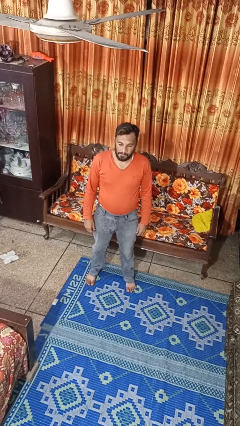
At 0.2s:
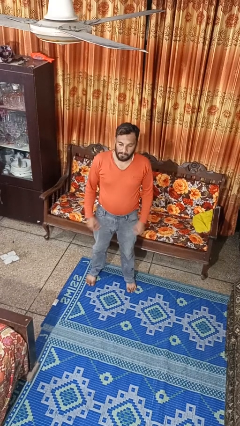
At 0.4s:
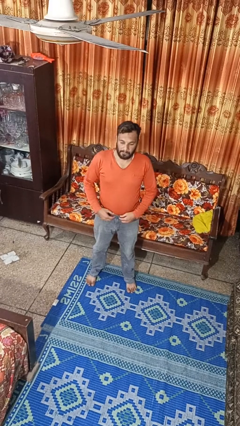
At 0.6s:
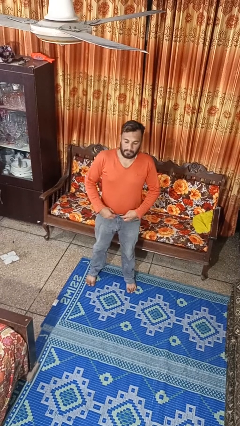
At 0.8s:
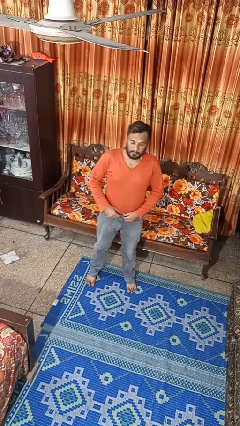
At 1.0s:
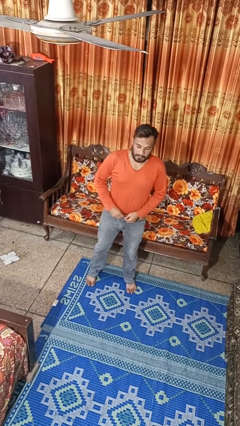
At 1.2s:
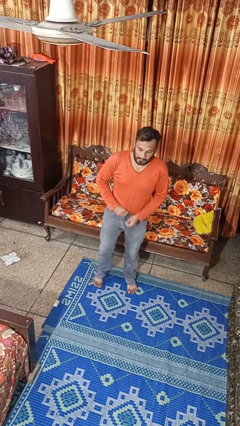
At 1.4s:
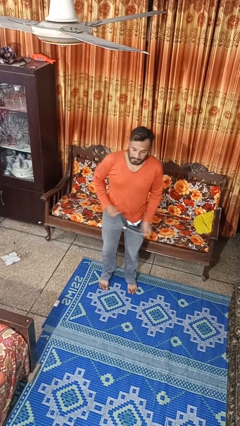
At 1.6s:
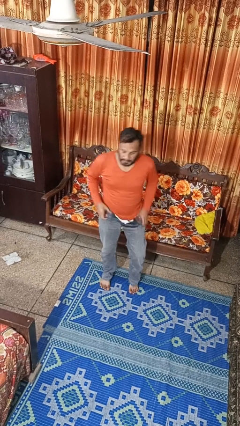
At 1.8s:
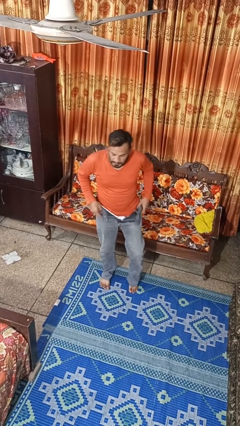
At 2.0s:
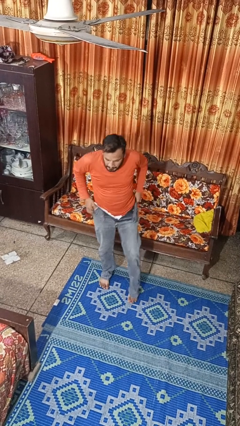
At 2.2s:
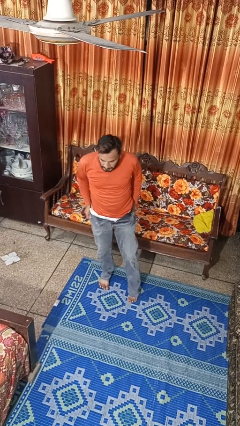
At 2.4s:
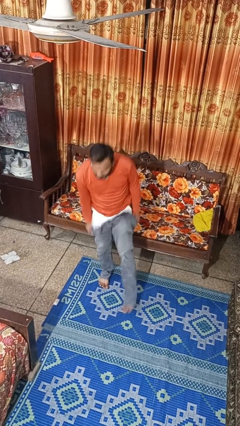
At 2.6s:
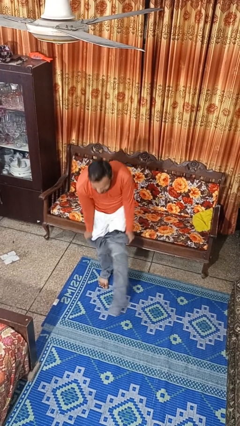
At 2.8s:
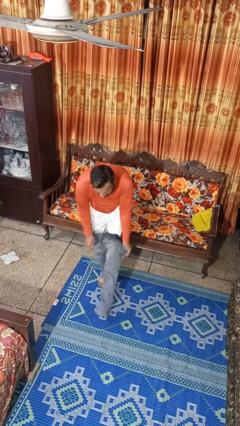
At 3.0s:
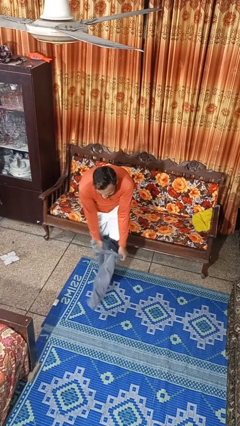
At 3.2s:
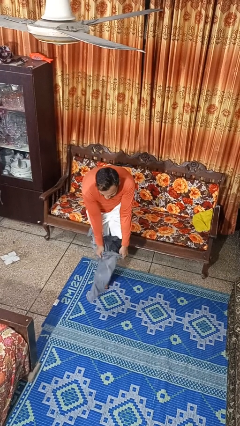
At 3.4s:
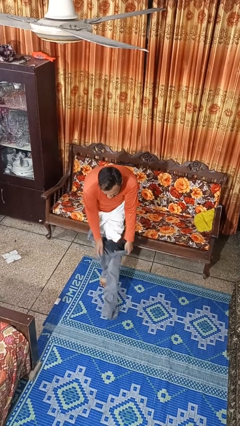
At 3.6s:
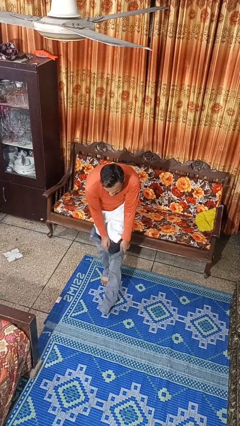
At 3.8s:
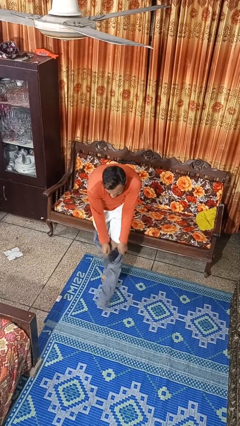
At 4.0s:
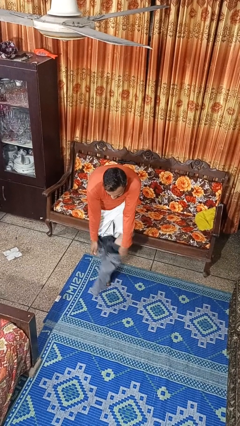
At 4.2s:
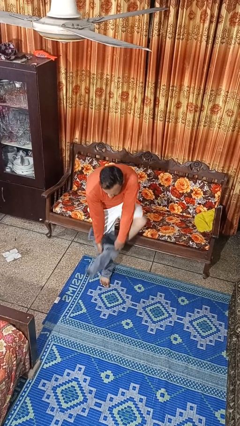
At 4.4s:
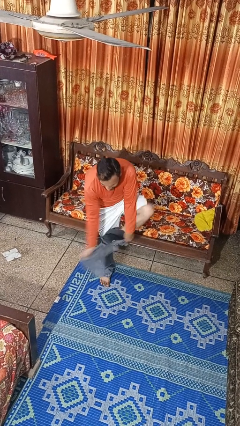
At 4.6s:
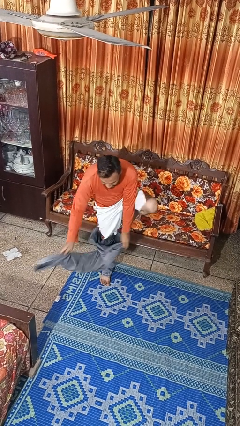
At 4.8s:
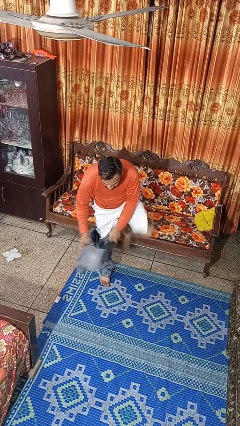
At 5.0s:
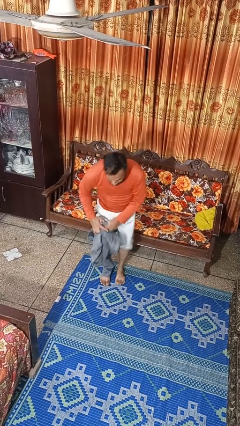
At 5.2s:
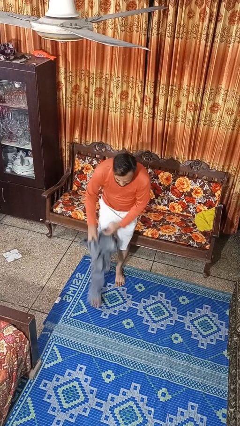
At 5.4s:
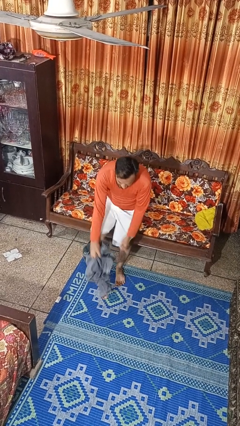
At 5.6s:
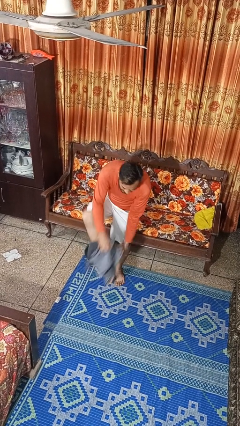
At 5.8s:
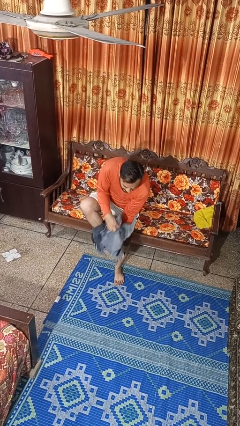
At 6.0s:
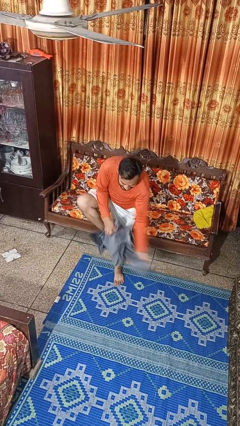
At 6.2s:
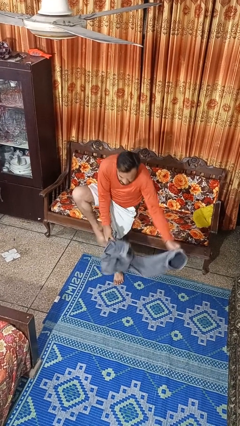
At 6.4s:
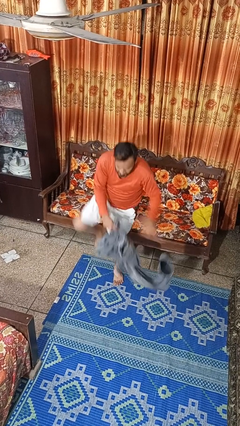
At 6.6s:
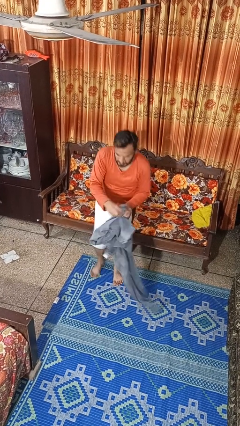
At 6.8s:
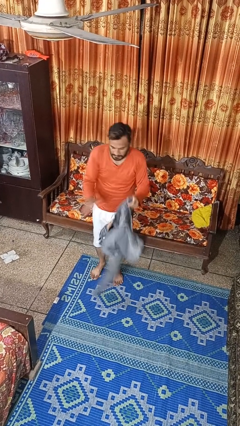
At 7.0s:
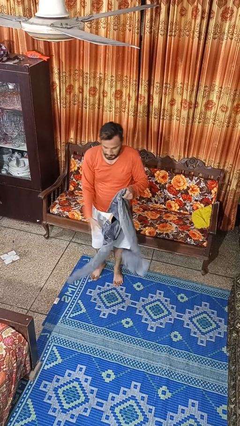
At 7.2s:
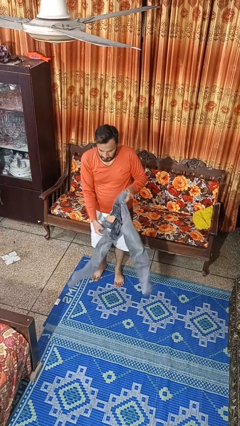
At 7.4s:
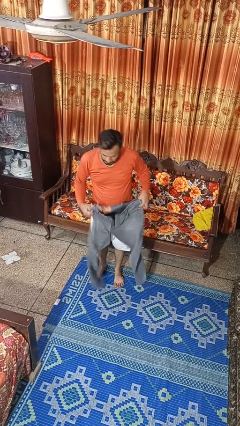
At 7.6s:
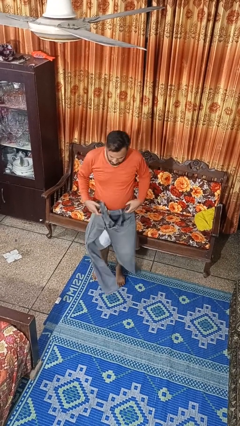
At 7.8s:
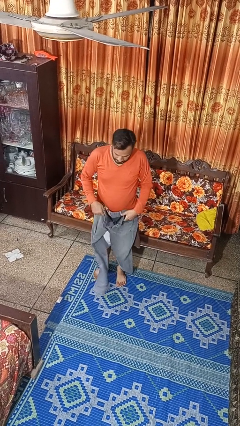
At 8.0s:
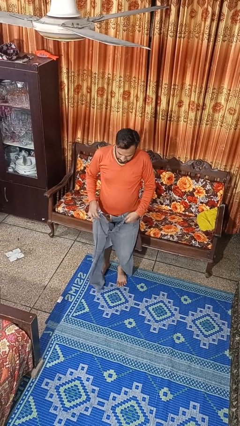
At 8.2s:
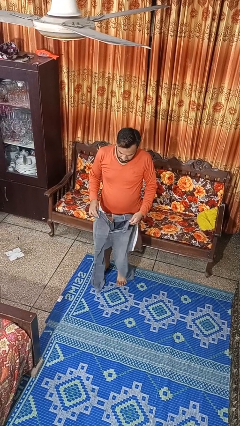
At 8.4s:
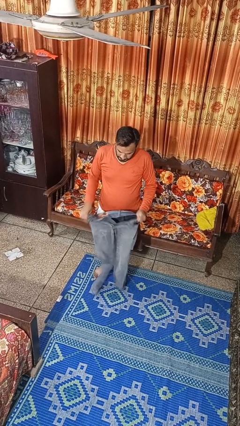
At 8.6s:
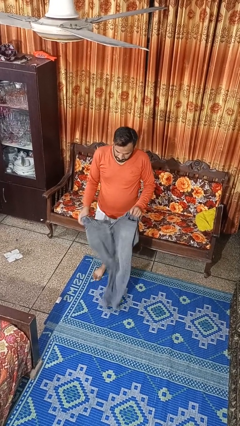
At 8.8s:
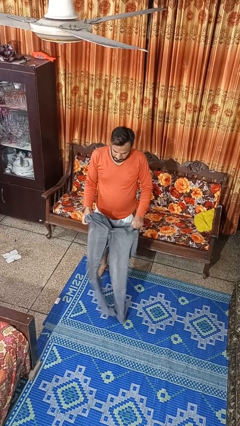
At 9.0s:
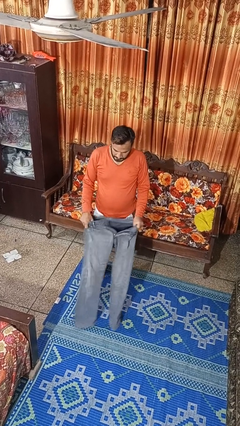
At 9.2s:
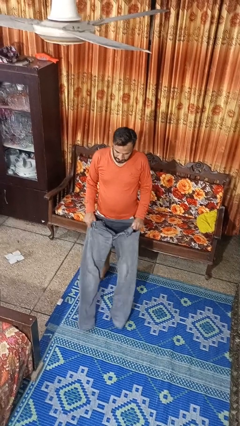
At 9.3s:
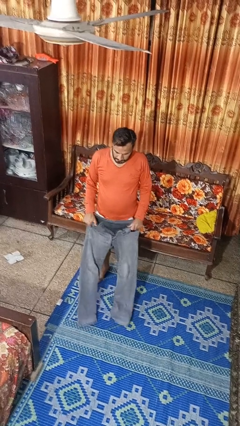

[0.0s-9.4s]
person takes off pants

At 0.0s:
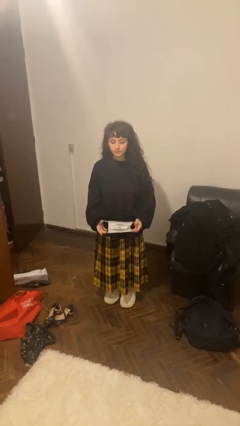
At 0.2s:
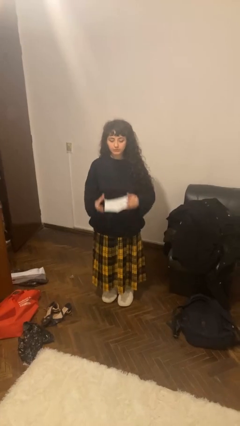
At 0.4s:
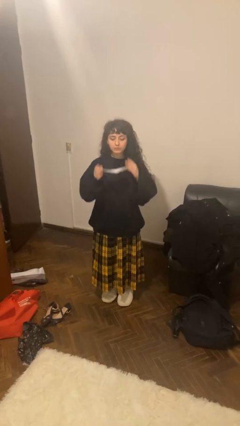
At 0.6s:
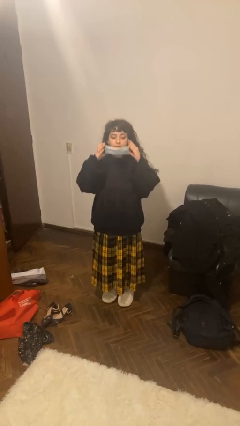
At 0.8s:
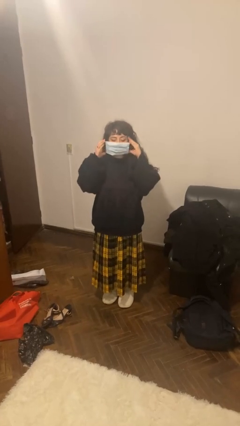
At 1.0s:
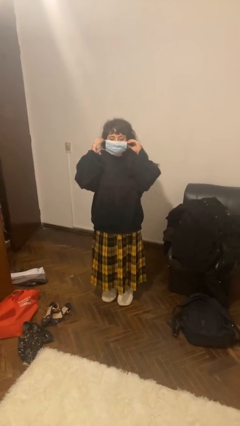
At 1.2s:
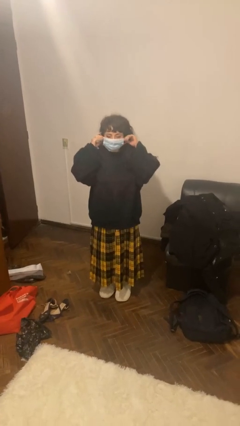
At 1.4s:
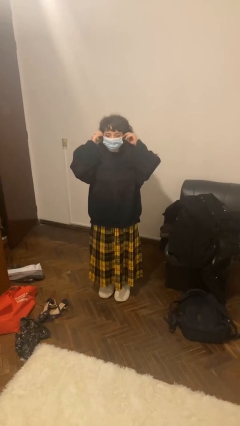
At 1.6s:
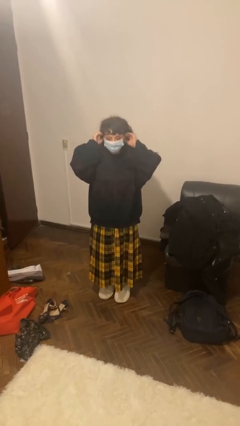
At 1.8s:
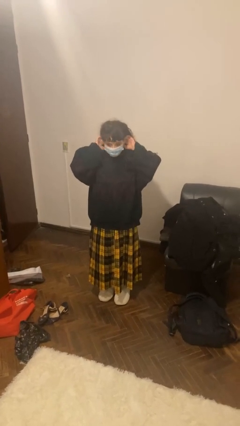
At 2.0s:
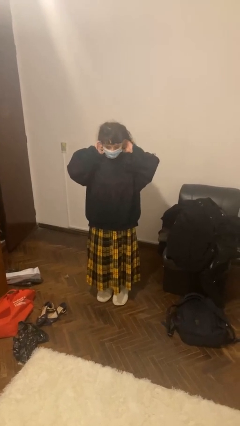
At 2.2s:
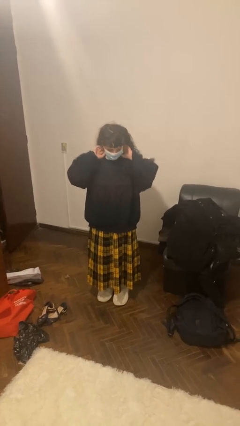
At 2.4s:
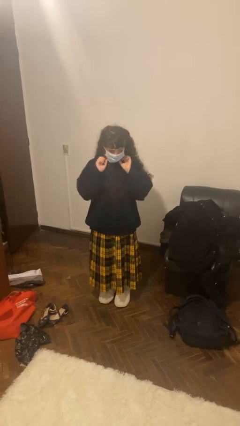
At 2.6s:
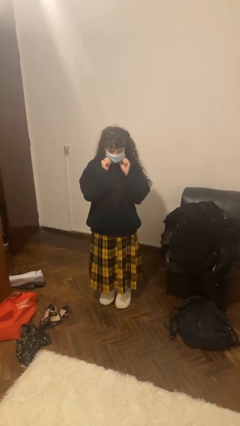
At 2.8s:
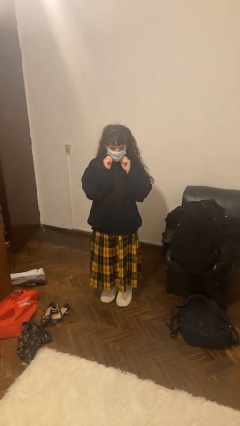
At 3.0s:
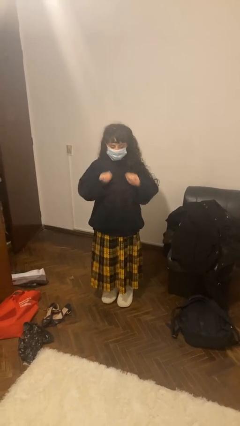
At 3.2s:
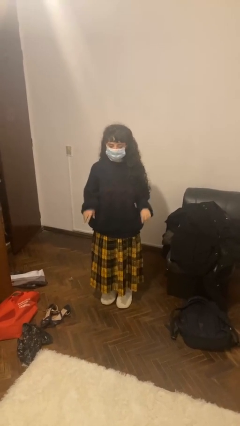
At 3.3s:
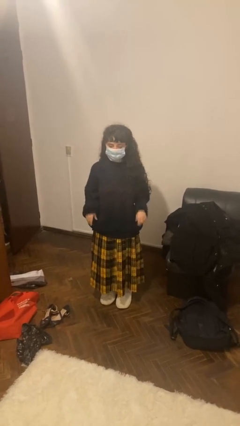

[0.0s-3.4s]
person puts on facemask

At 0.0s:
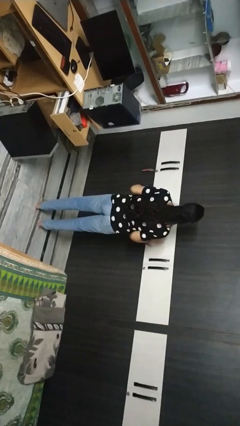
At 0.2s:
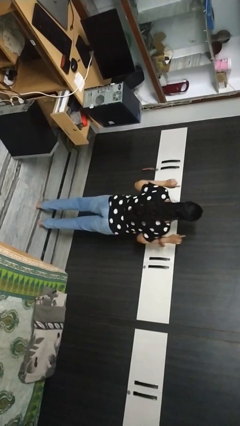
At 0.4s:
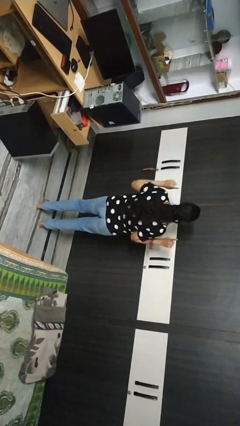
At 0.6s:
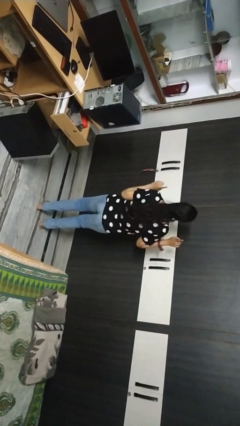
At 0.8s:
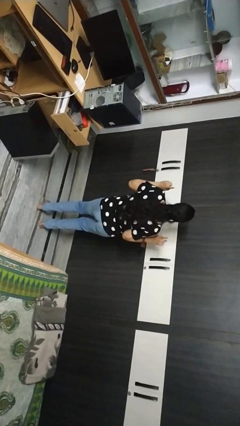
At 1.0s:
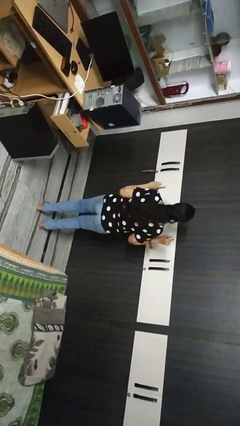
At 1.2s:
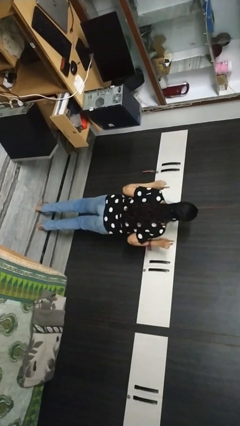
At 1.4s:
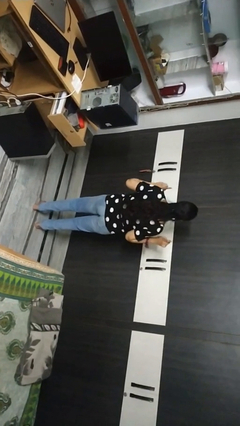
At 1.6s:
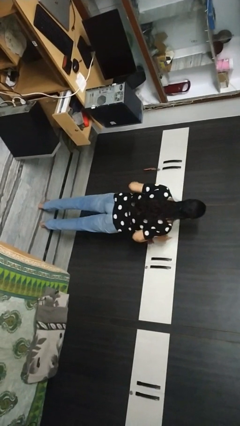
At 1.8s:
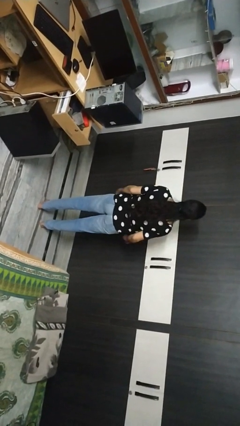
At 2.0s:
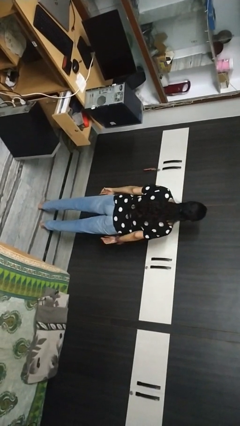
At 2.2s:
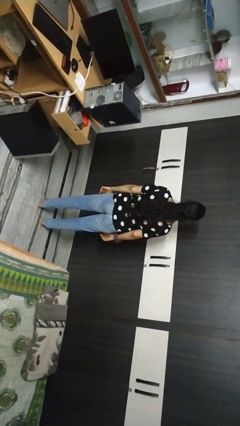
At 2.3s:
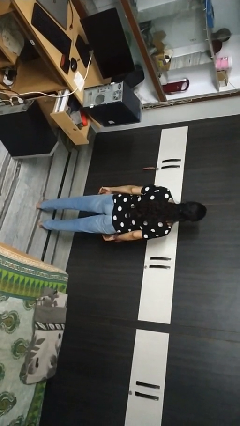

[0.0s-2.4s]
person dances in place

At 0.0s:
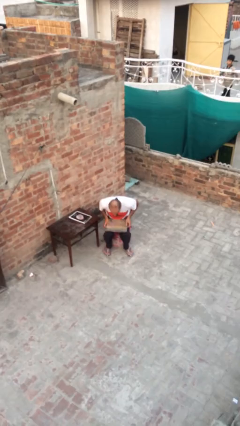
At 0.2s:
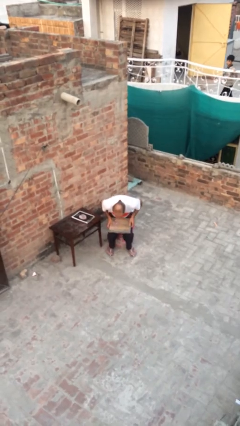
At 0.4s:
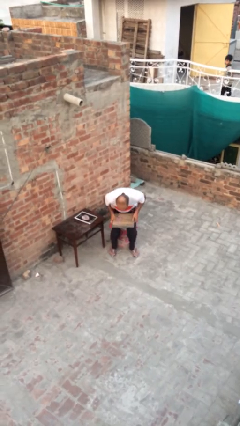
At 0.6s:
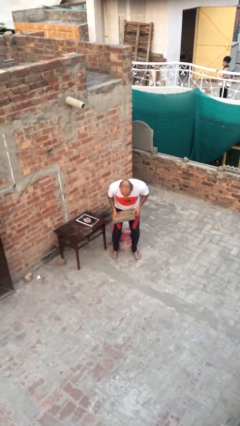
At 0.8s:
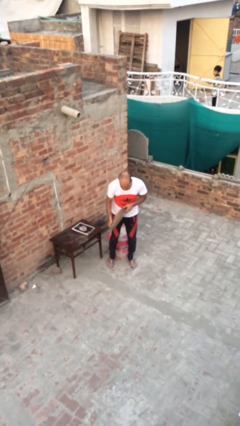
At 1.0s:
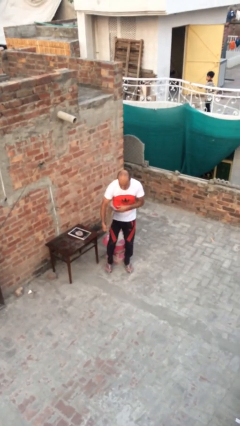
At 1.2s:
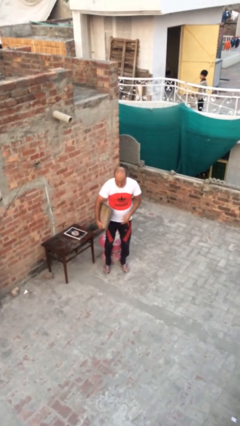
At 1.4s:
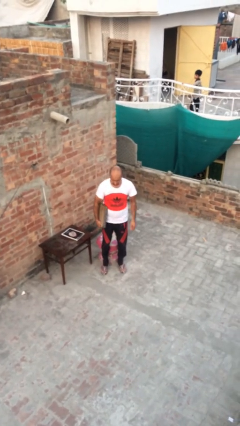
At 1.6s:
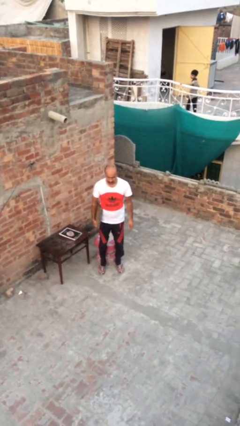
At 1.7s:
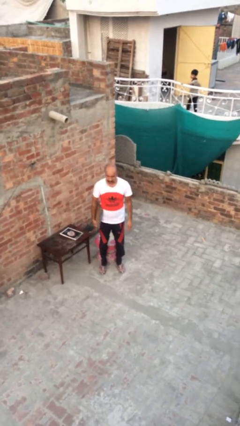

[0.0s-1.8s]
person stands up

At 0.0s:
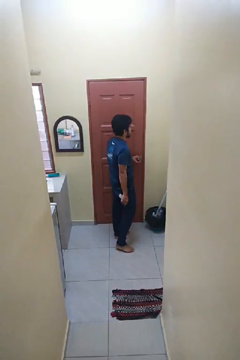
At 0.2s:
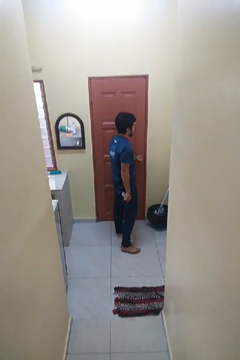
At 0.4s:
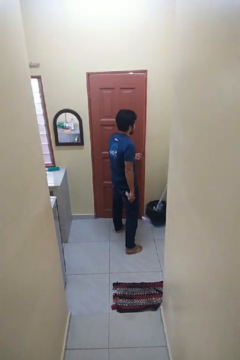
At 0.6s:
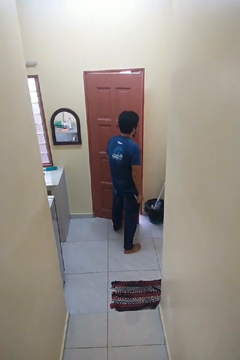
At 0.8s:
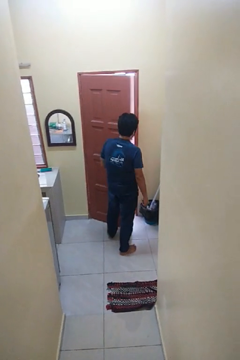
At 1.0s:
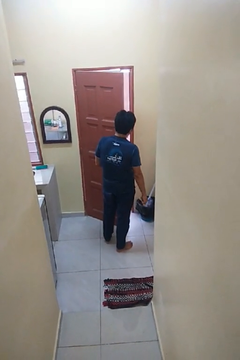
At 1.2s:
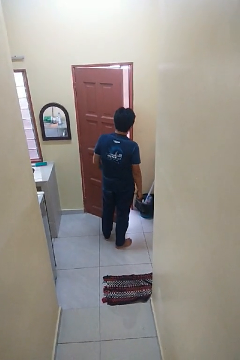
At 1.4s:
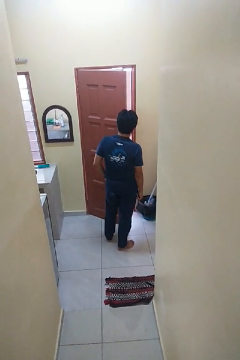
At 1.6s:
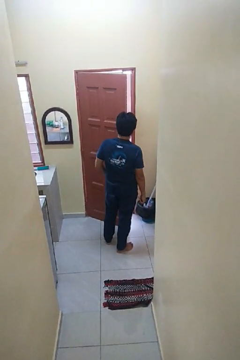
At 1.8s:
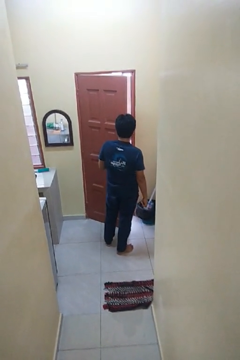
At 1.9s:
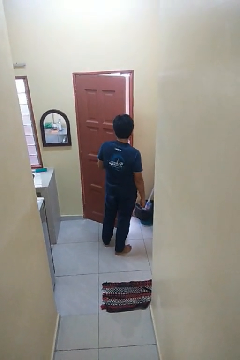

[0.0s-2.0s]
person opens facility door
